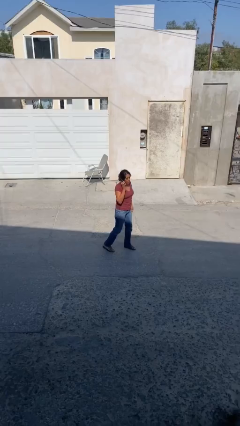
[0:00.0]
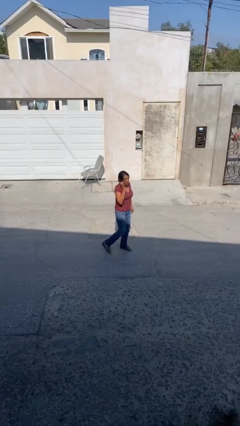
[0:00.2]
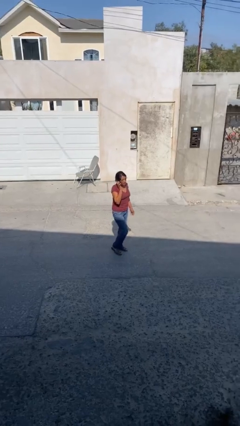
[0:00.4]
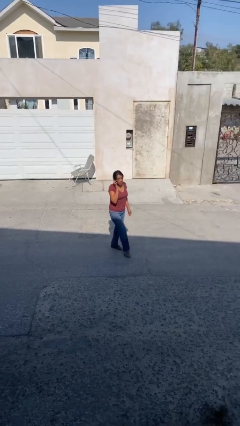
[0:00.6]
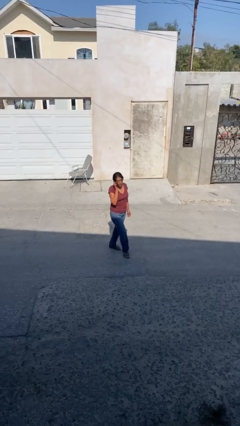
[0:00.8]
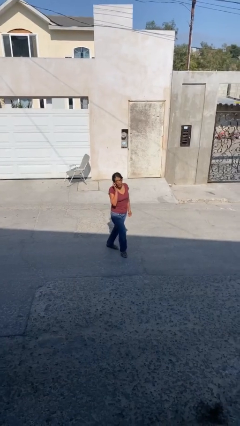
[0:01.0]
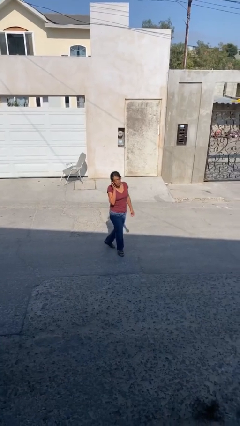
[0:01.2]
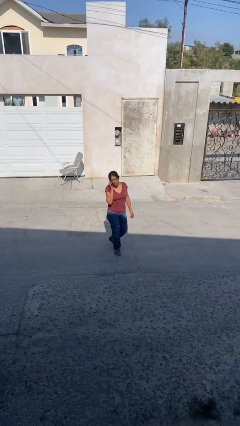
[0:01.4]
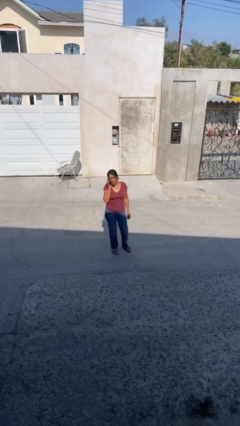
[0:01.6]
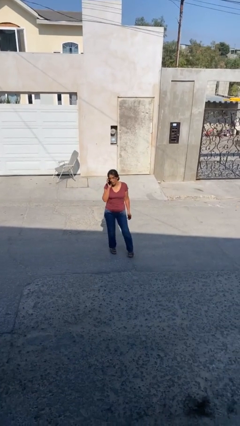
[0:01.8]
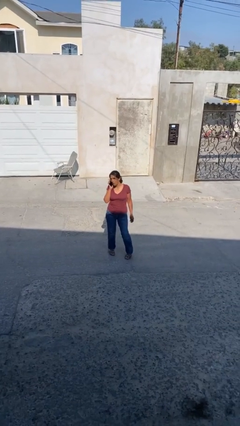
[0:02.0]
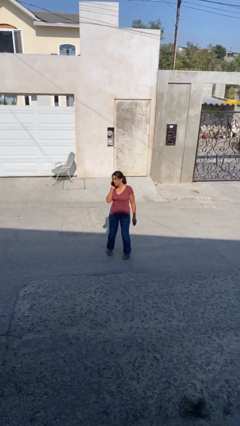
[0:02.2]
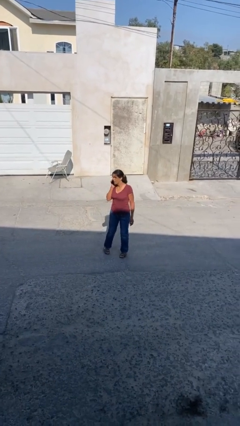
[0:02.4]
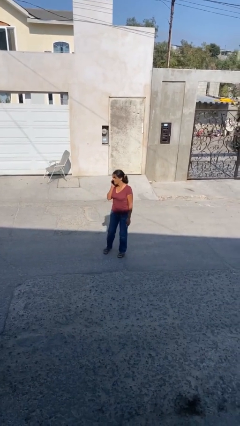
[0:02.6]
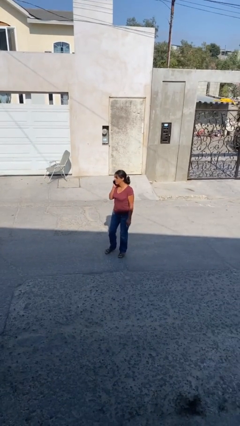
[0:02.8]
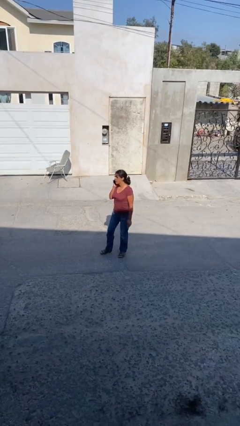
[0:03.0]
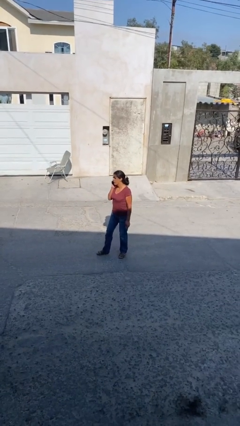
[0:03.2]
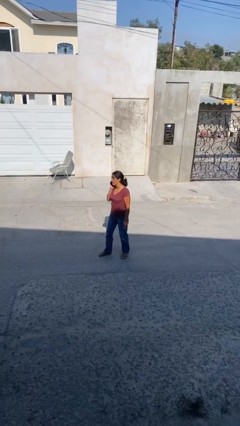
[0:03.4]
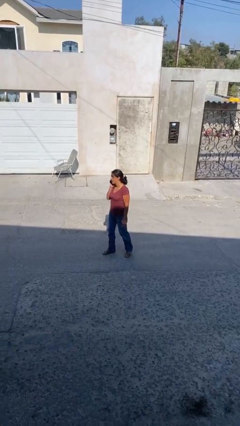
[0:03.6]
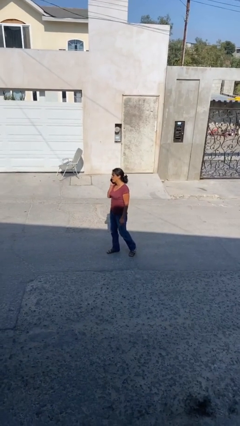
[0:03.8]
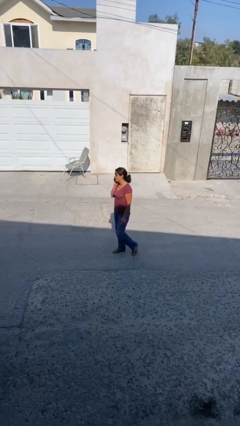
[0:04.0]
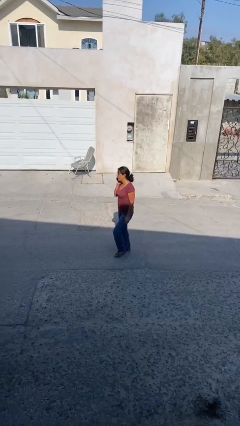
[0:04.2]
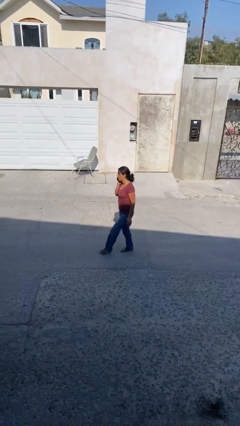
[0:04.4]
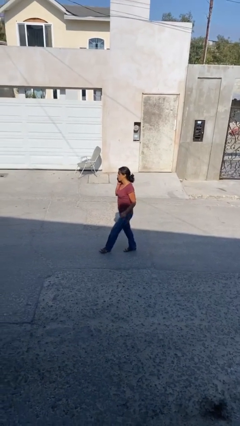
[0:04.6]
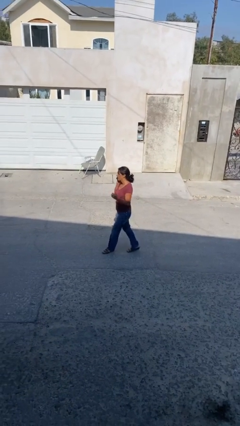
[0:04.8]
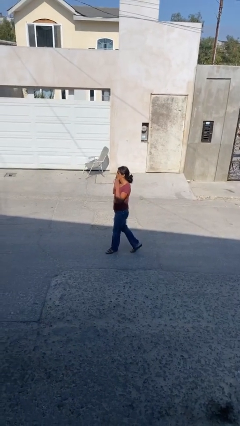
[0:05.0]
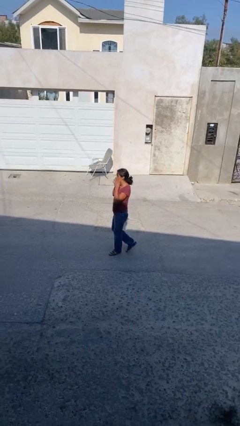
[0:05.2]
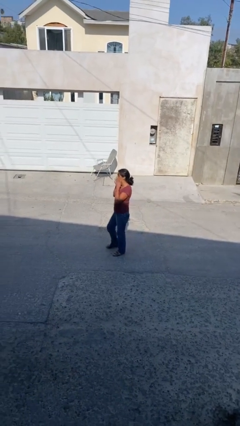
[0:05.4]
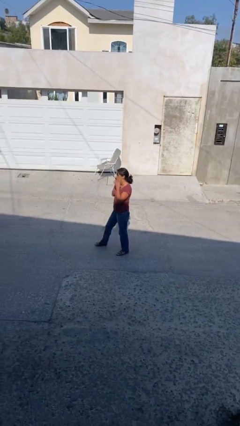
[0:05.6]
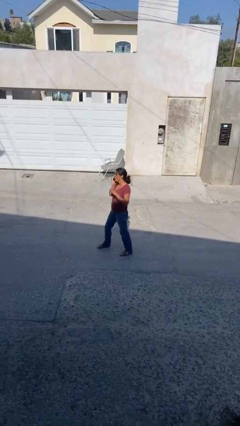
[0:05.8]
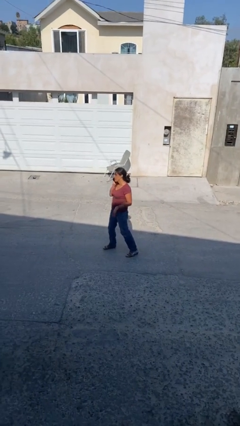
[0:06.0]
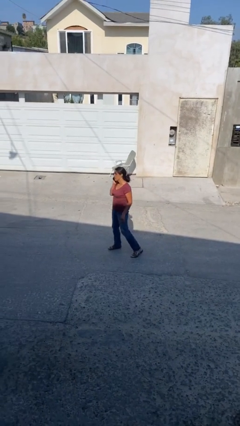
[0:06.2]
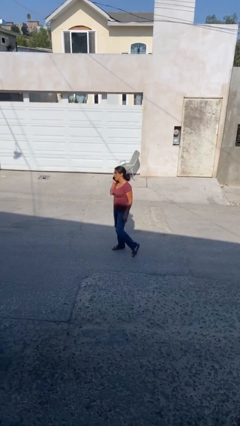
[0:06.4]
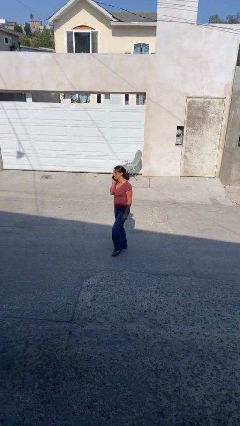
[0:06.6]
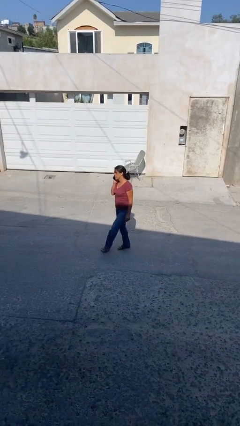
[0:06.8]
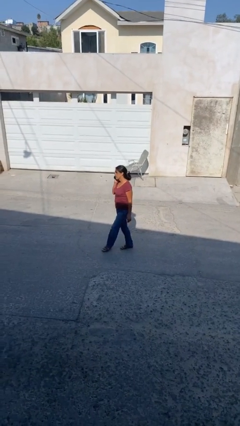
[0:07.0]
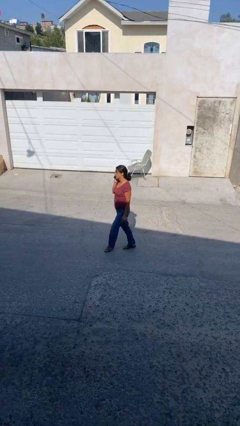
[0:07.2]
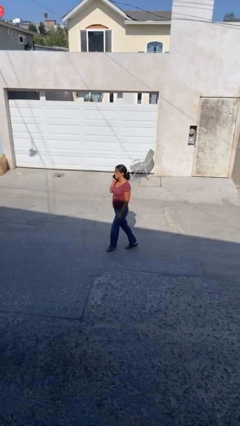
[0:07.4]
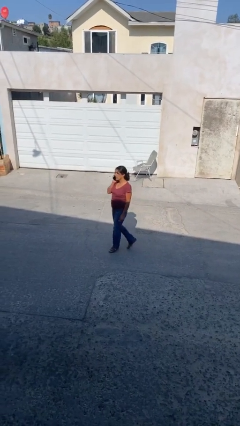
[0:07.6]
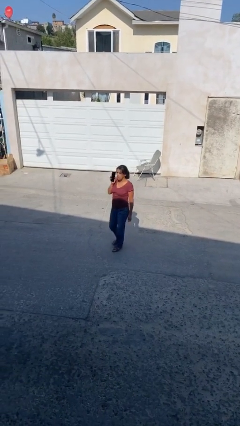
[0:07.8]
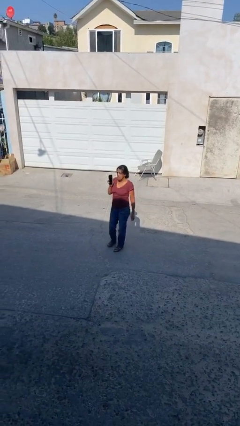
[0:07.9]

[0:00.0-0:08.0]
person talks on phone

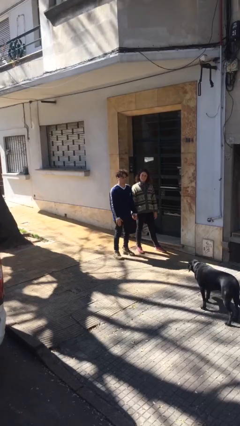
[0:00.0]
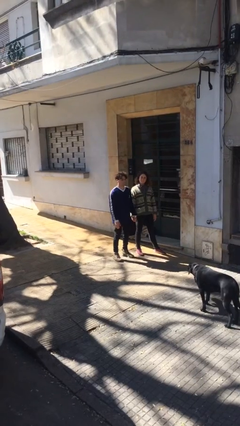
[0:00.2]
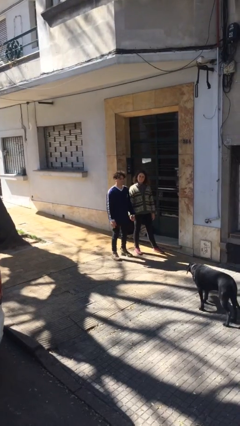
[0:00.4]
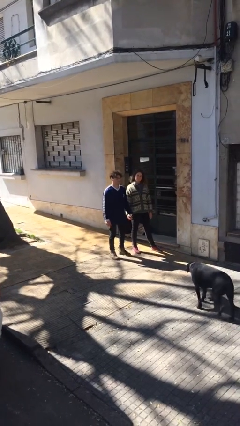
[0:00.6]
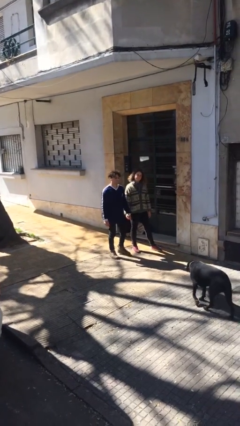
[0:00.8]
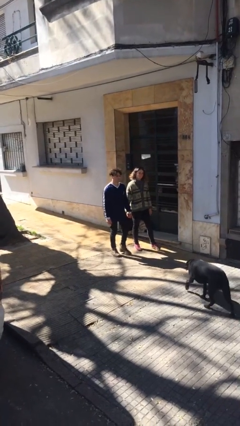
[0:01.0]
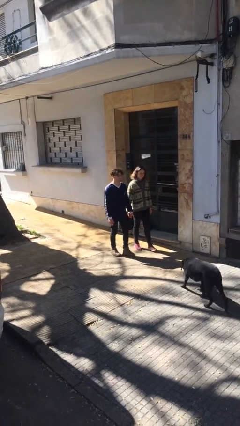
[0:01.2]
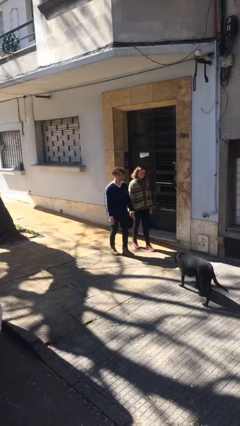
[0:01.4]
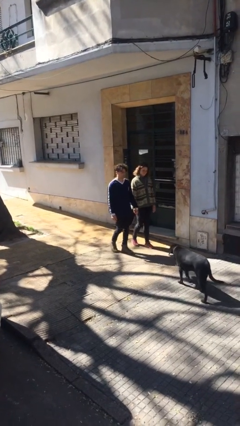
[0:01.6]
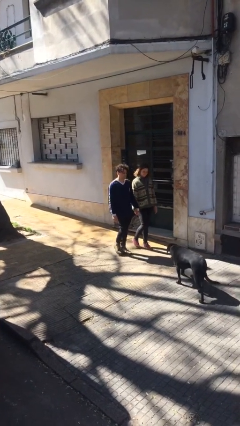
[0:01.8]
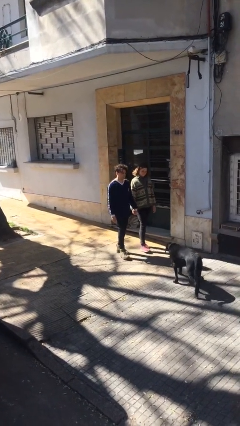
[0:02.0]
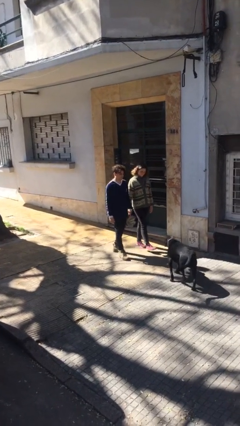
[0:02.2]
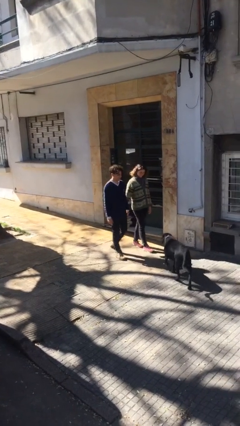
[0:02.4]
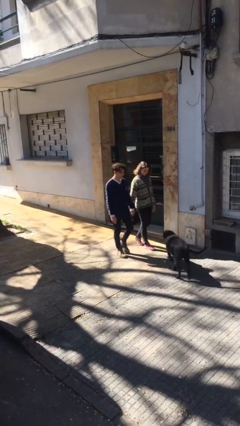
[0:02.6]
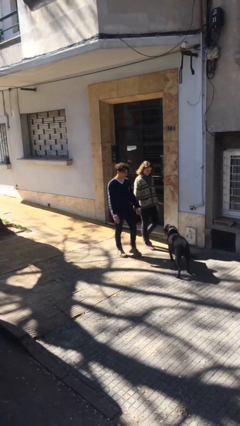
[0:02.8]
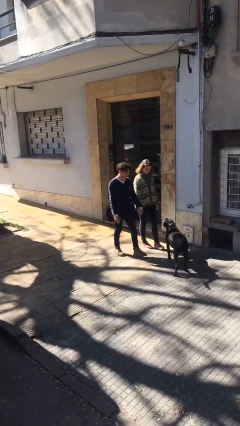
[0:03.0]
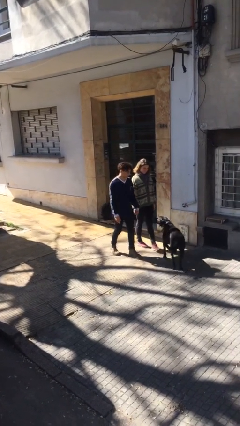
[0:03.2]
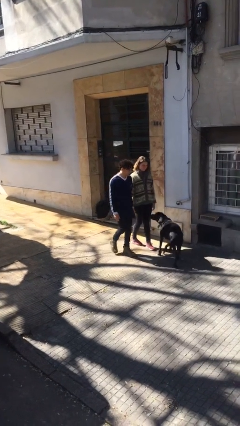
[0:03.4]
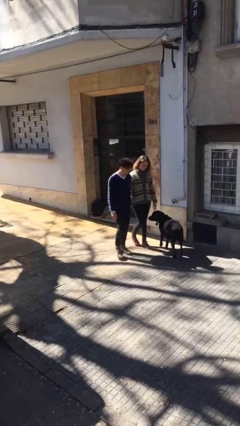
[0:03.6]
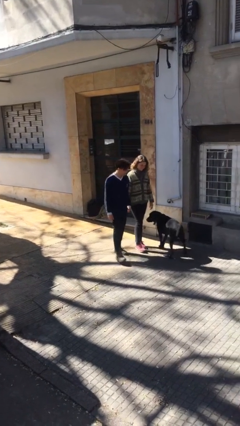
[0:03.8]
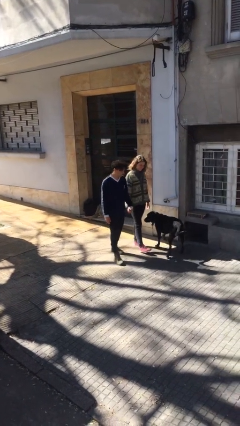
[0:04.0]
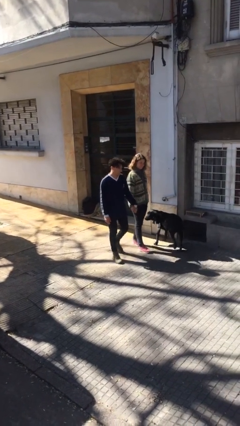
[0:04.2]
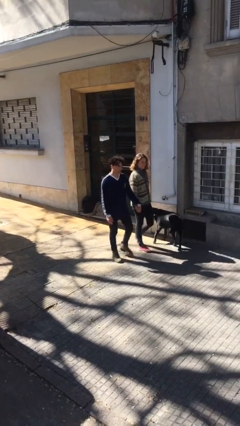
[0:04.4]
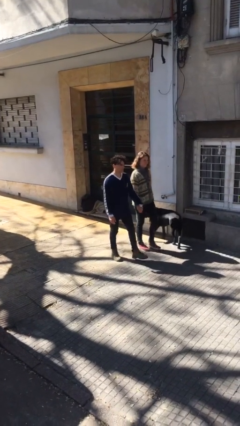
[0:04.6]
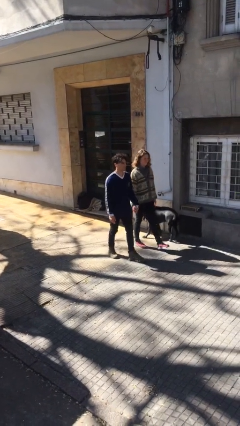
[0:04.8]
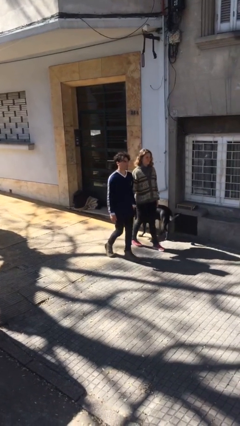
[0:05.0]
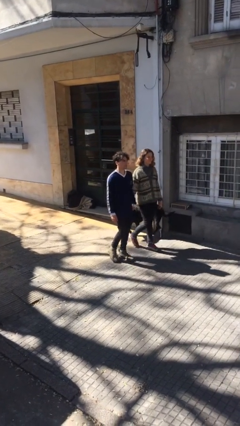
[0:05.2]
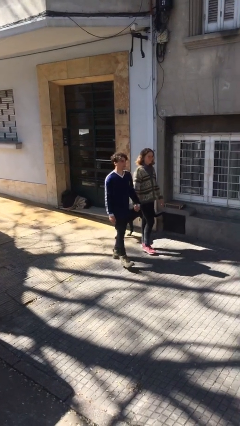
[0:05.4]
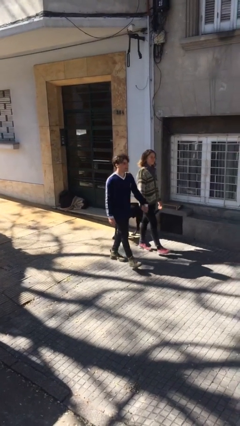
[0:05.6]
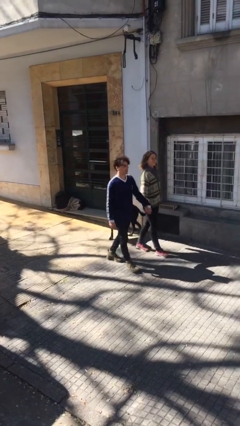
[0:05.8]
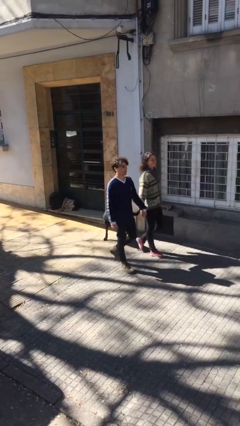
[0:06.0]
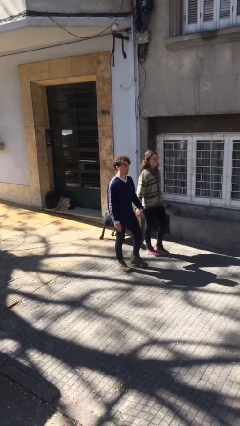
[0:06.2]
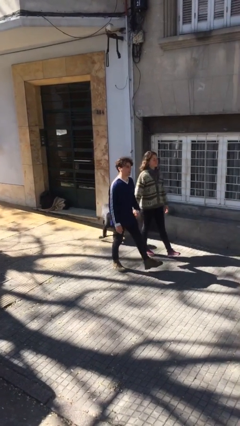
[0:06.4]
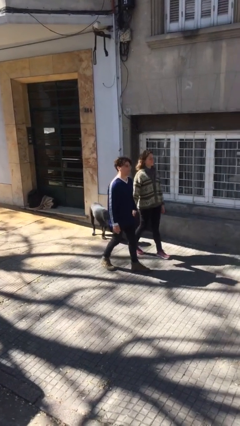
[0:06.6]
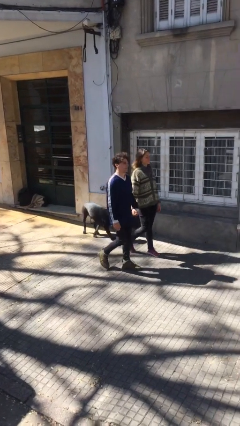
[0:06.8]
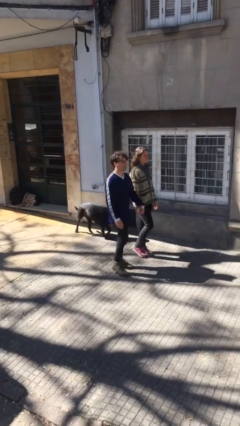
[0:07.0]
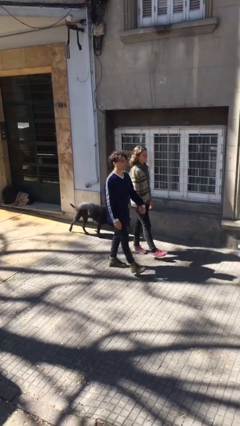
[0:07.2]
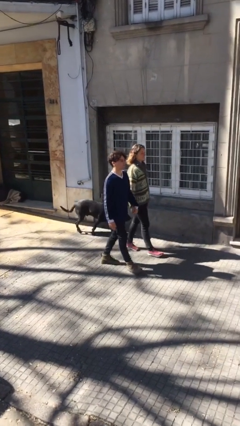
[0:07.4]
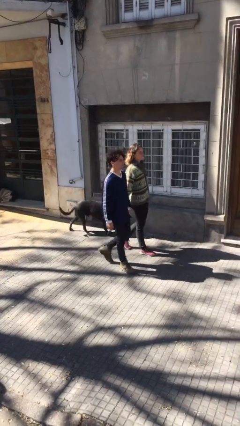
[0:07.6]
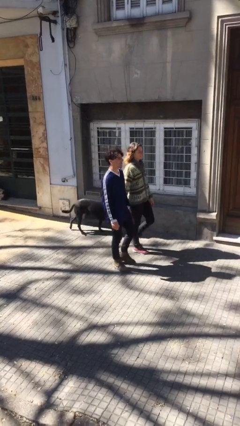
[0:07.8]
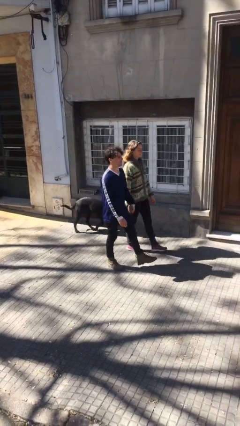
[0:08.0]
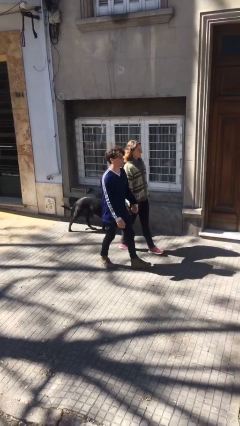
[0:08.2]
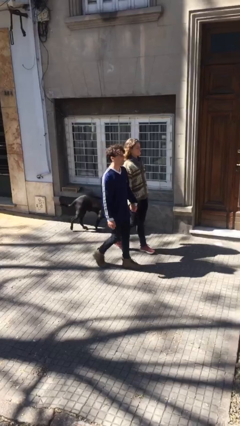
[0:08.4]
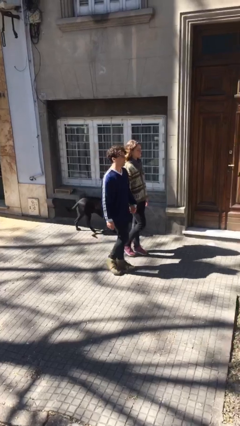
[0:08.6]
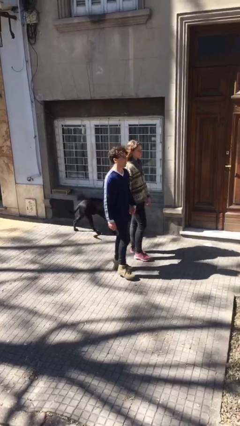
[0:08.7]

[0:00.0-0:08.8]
person holds hand

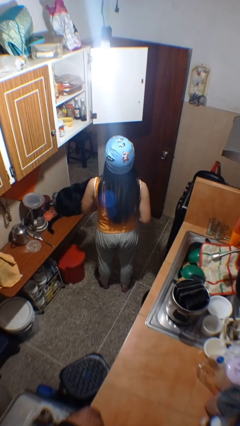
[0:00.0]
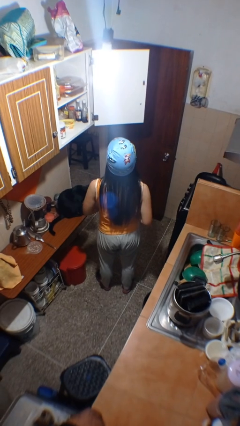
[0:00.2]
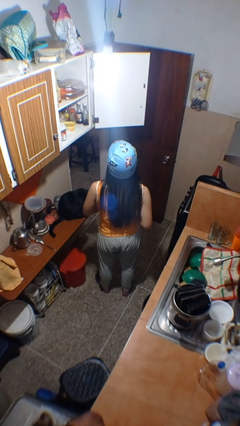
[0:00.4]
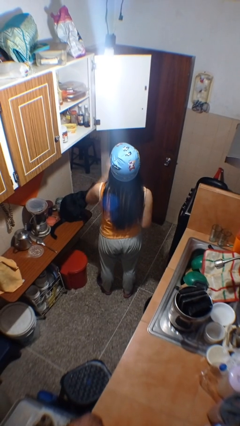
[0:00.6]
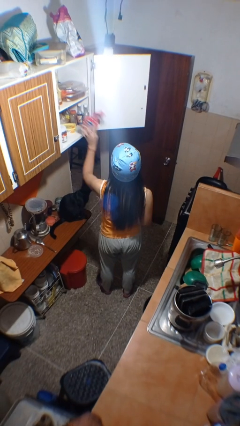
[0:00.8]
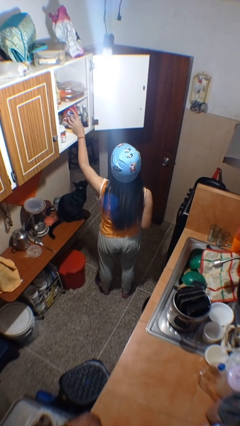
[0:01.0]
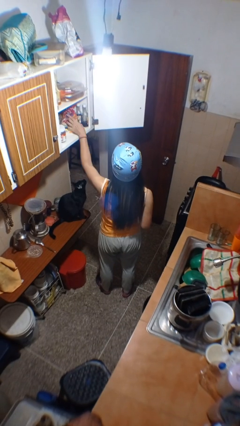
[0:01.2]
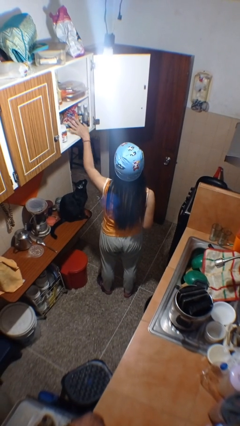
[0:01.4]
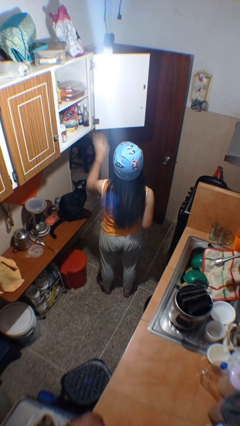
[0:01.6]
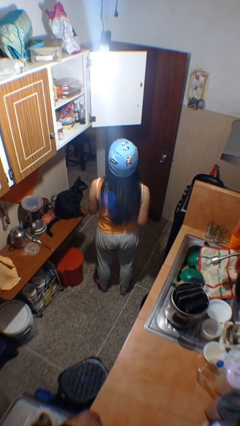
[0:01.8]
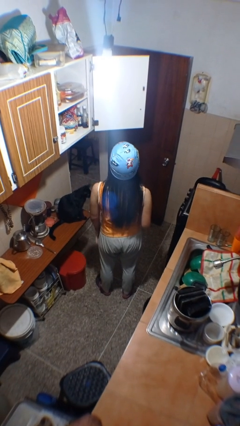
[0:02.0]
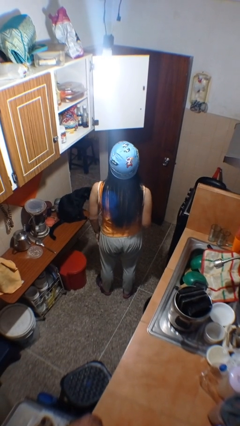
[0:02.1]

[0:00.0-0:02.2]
person puts down object into cabinet
